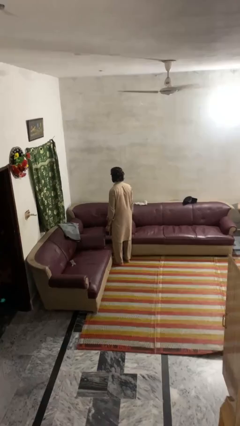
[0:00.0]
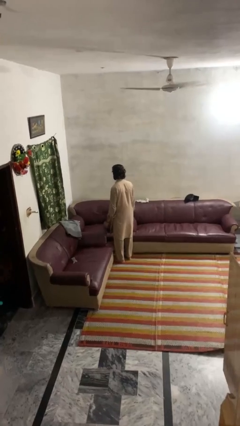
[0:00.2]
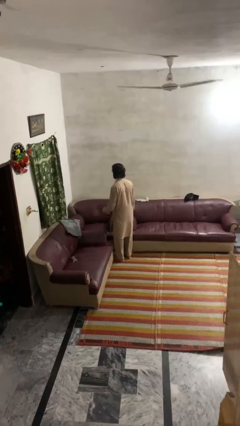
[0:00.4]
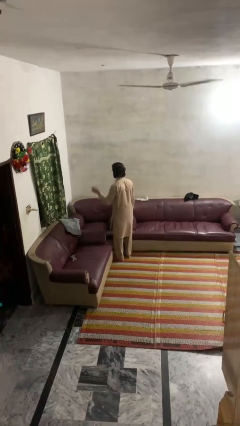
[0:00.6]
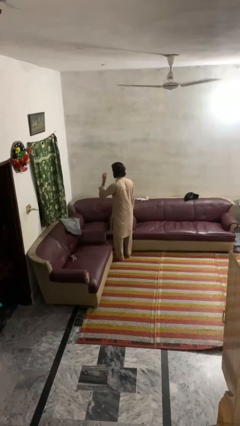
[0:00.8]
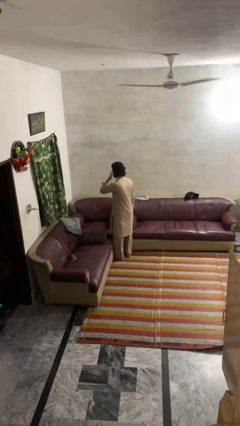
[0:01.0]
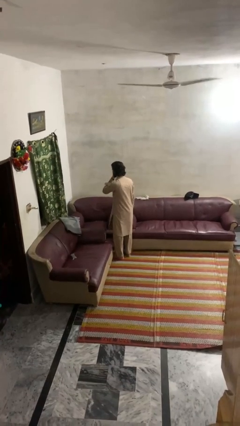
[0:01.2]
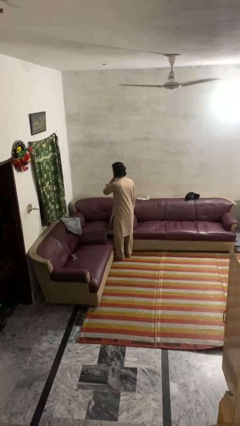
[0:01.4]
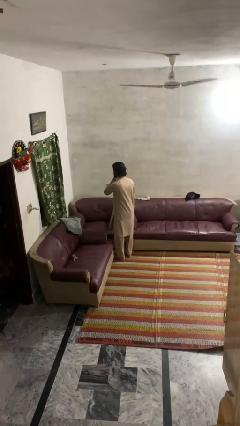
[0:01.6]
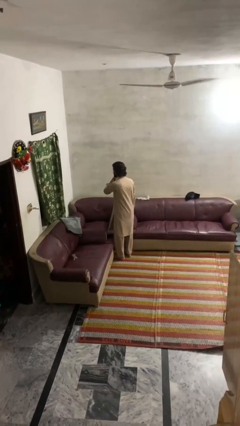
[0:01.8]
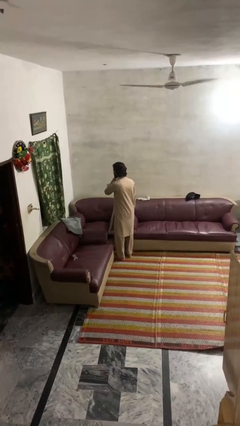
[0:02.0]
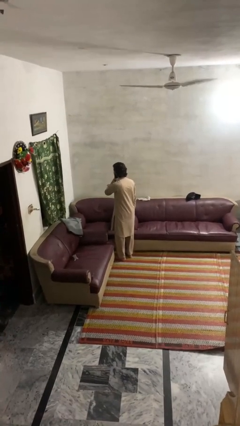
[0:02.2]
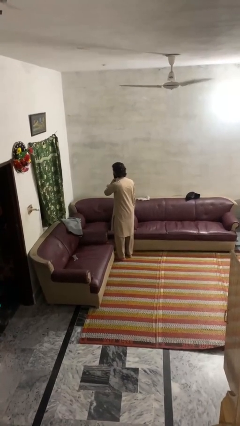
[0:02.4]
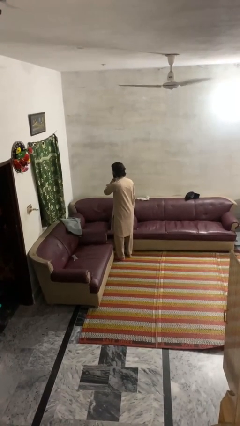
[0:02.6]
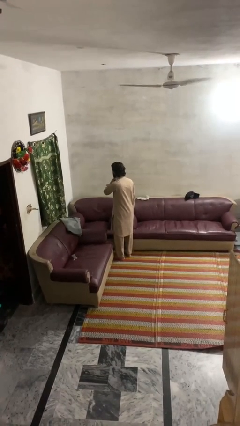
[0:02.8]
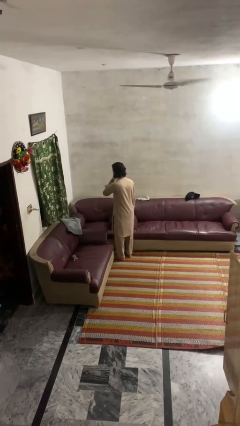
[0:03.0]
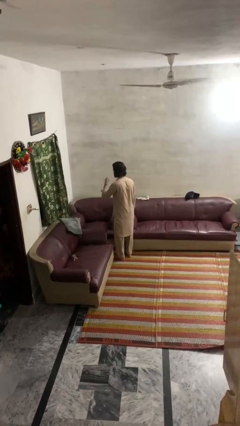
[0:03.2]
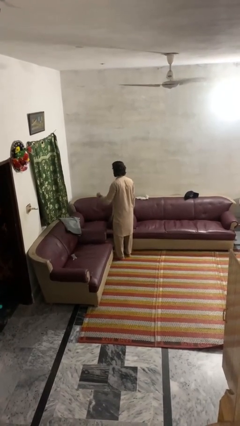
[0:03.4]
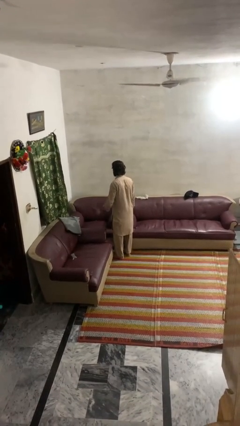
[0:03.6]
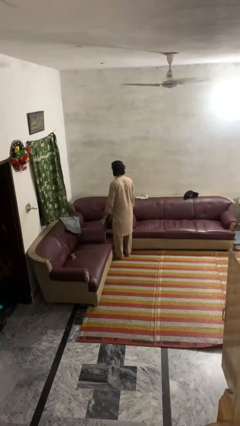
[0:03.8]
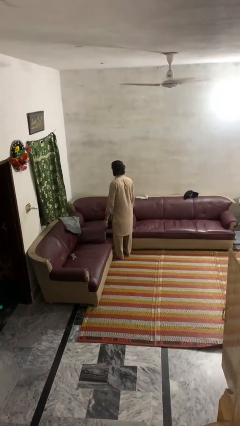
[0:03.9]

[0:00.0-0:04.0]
person scratches face

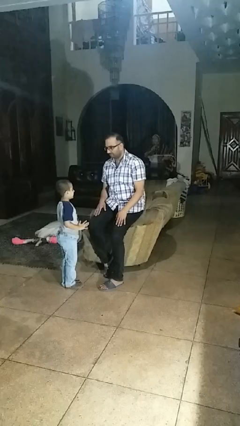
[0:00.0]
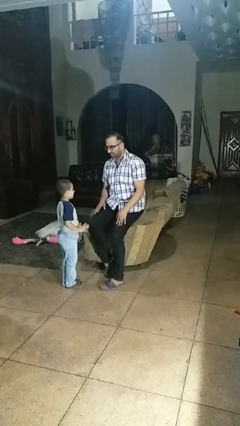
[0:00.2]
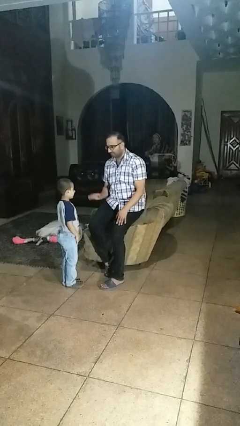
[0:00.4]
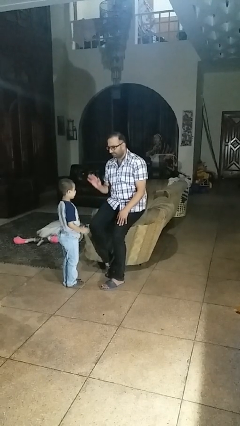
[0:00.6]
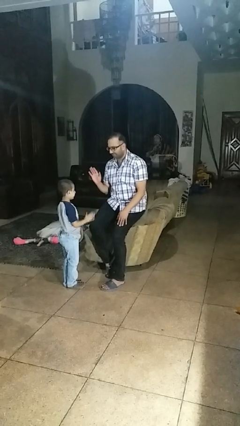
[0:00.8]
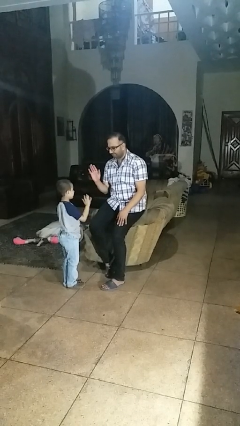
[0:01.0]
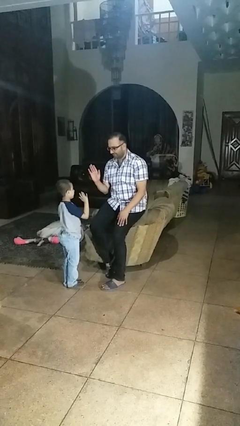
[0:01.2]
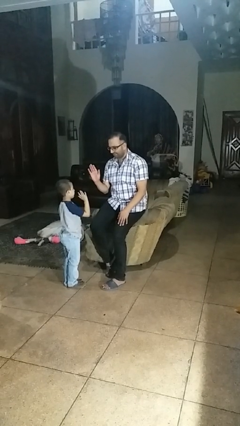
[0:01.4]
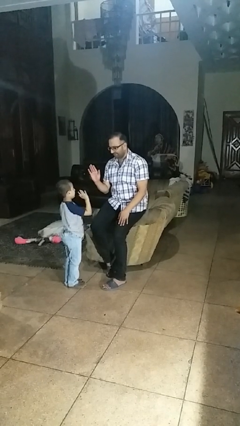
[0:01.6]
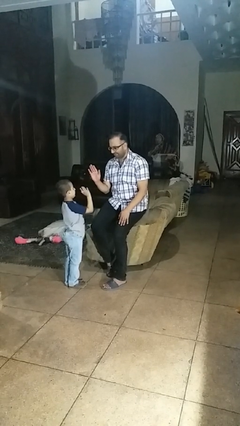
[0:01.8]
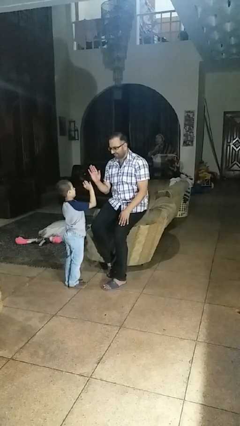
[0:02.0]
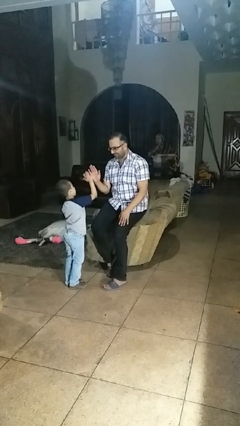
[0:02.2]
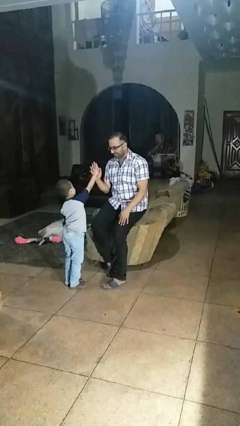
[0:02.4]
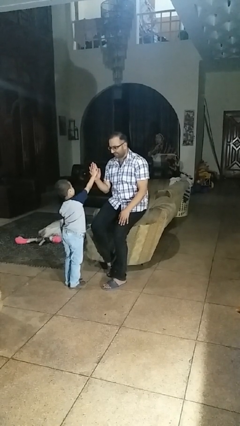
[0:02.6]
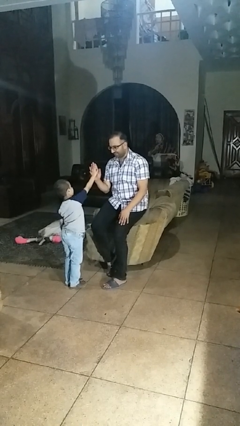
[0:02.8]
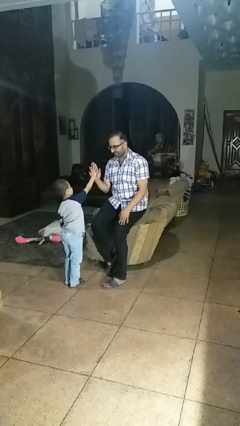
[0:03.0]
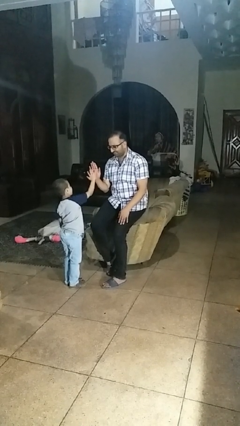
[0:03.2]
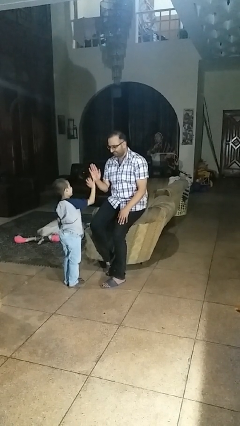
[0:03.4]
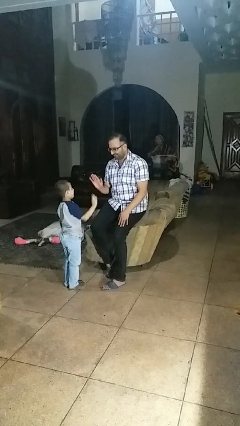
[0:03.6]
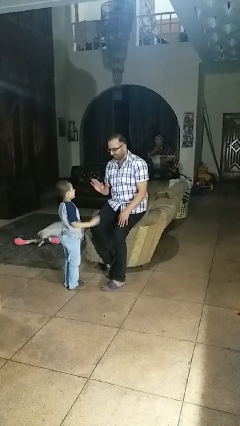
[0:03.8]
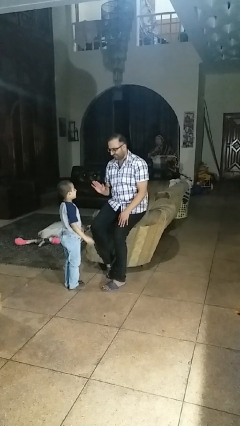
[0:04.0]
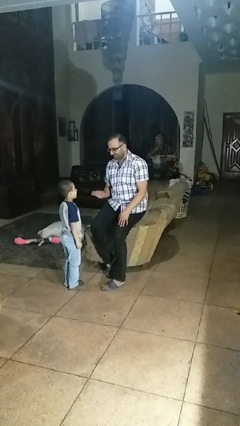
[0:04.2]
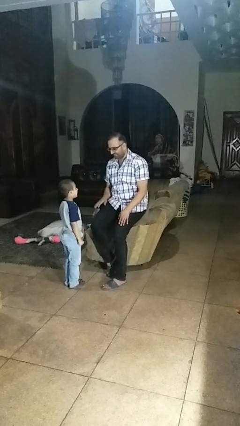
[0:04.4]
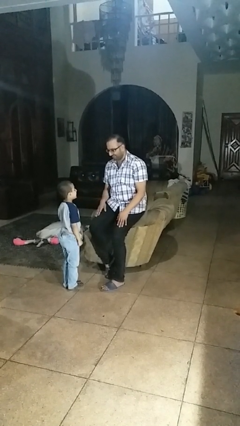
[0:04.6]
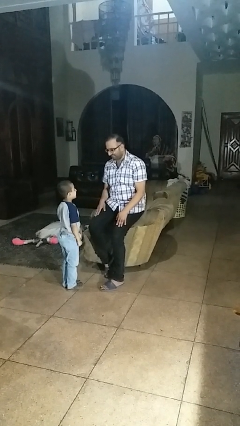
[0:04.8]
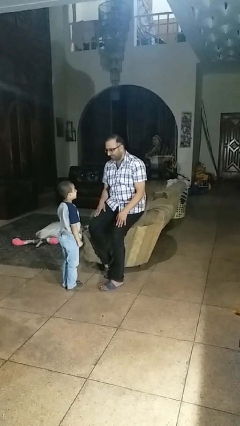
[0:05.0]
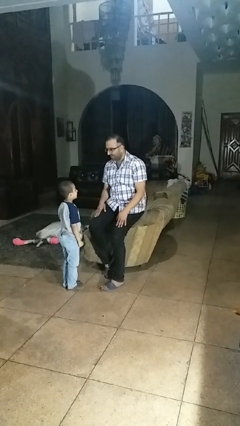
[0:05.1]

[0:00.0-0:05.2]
person highfives hand

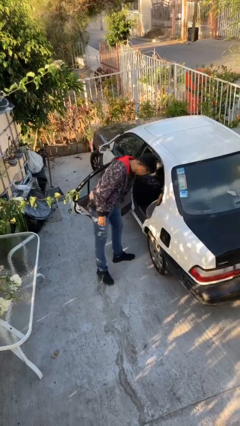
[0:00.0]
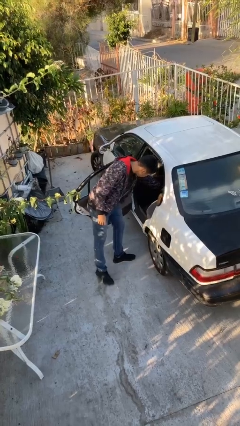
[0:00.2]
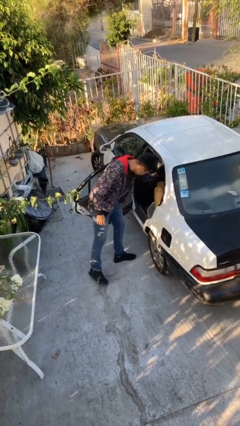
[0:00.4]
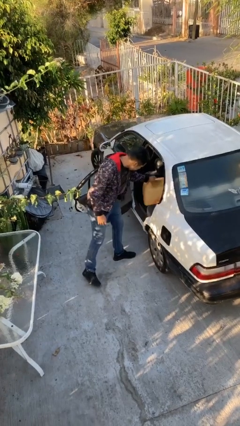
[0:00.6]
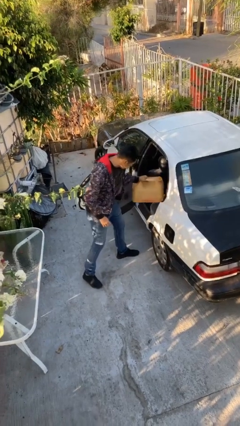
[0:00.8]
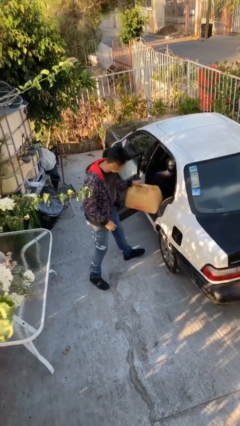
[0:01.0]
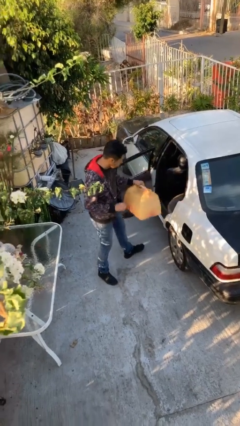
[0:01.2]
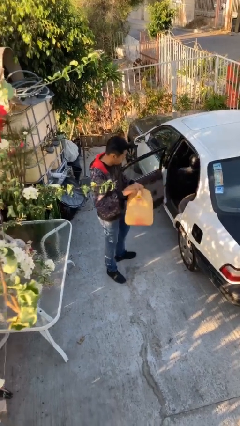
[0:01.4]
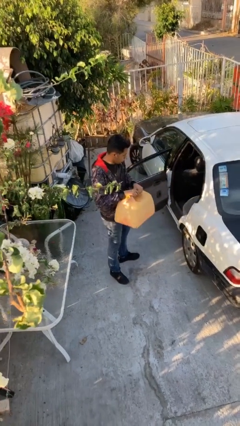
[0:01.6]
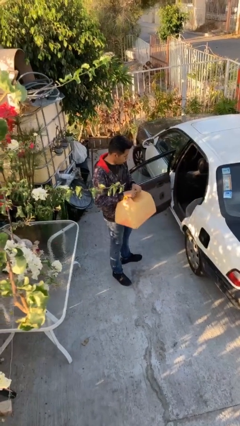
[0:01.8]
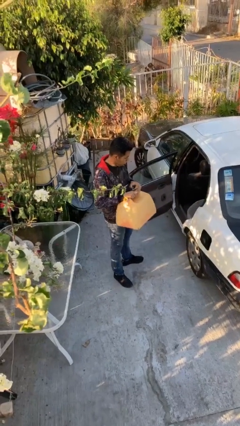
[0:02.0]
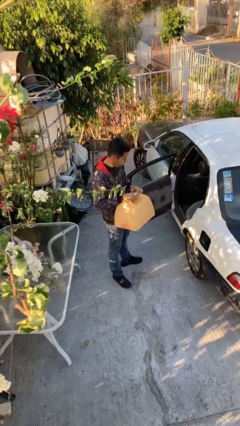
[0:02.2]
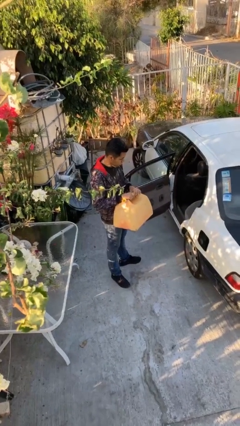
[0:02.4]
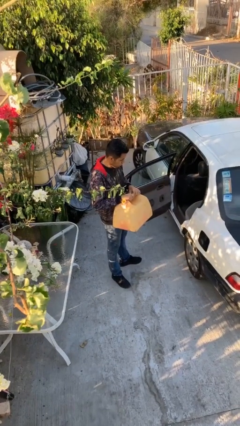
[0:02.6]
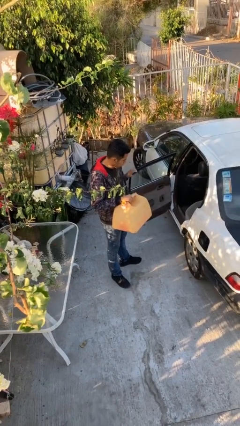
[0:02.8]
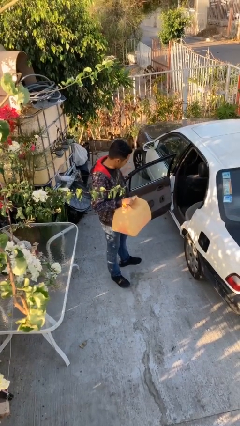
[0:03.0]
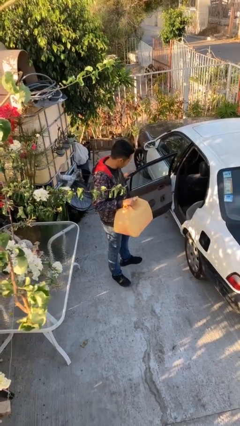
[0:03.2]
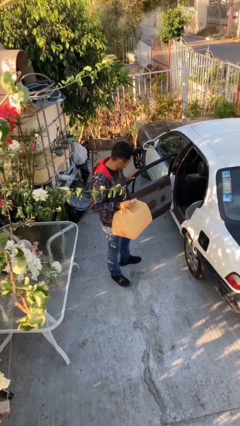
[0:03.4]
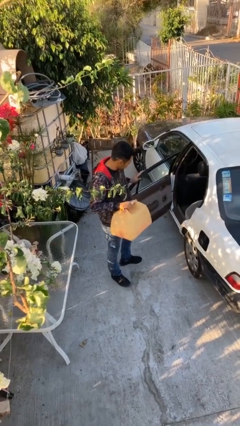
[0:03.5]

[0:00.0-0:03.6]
person unloads car

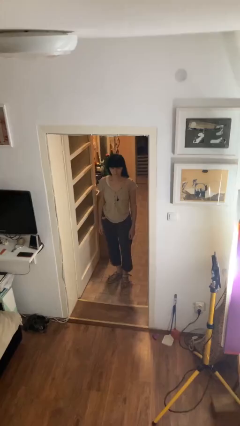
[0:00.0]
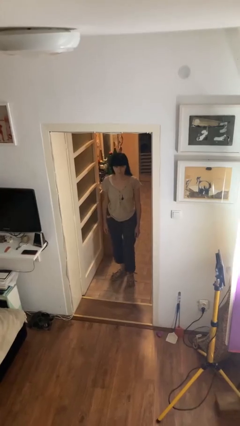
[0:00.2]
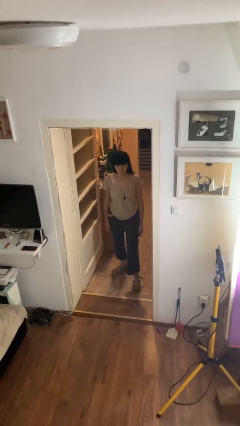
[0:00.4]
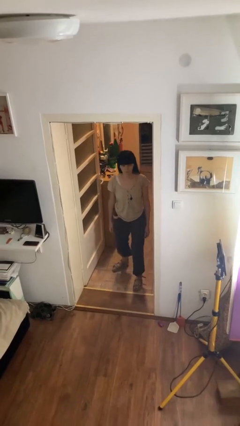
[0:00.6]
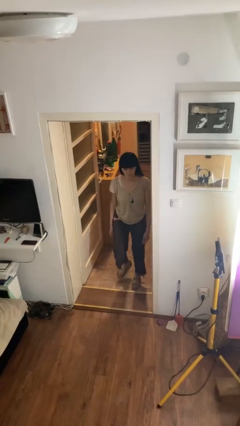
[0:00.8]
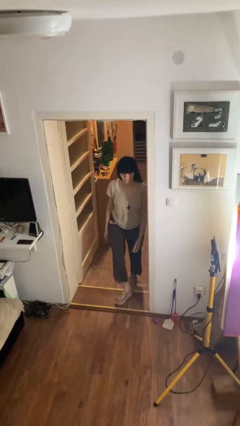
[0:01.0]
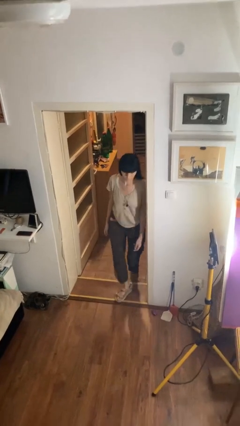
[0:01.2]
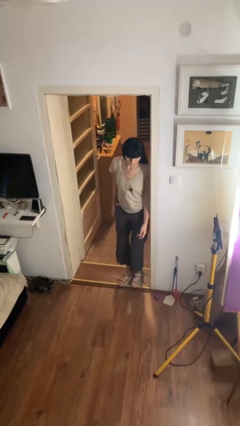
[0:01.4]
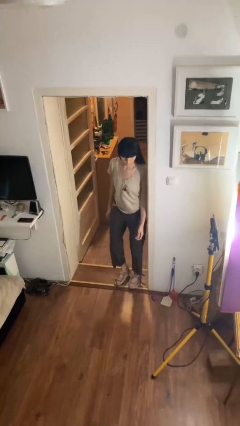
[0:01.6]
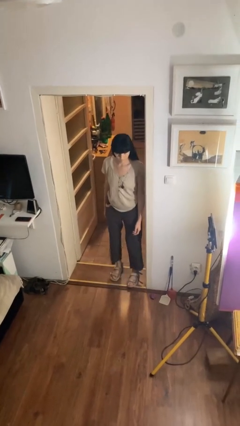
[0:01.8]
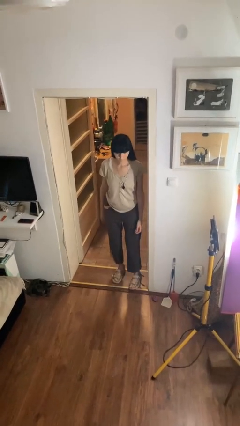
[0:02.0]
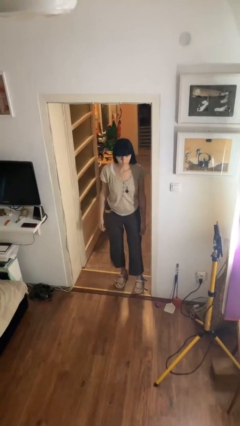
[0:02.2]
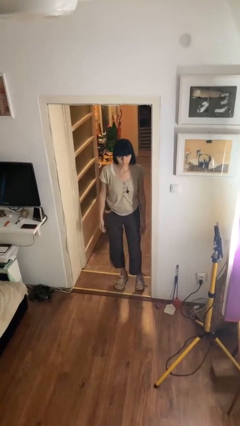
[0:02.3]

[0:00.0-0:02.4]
person bumps into wall

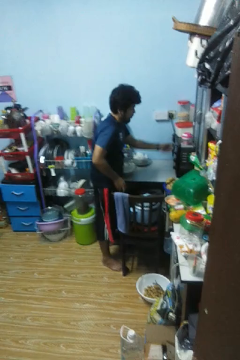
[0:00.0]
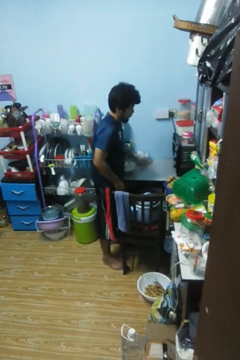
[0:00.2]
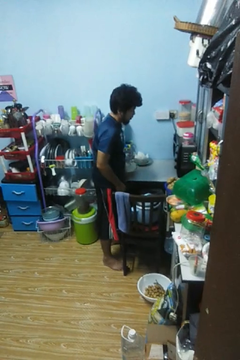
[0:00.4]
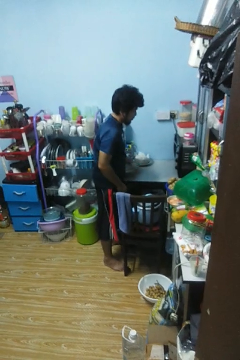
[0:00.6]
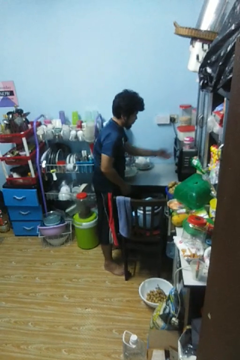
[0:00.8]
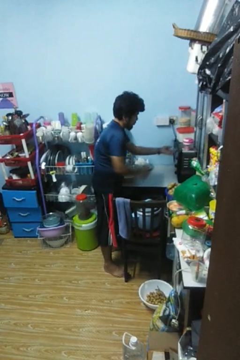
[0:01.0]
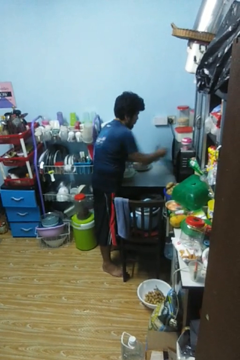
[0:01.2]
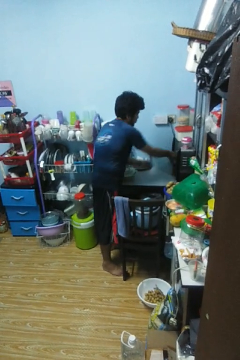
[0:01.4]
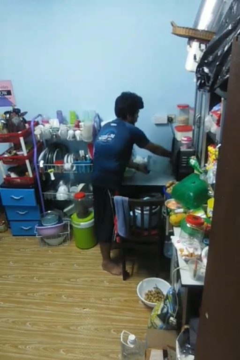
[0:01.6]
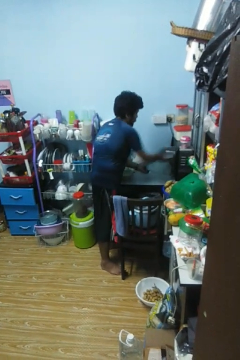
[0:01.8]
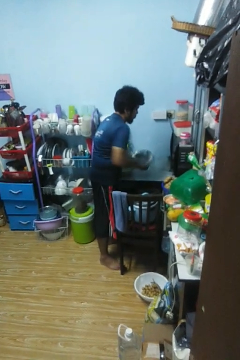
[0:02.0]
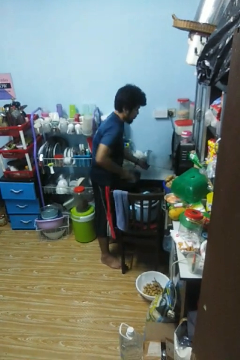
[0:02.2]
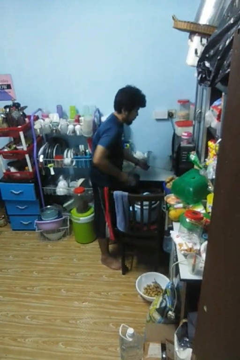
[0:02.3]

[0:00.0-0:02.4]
person takes object from oven

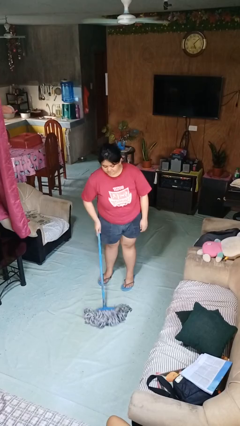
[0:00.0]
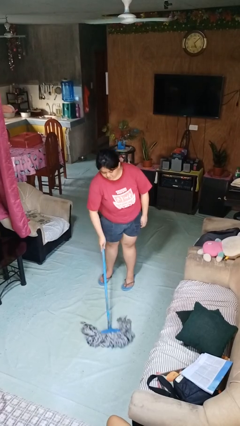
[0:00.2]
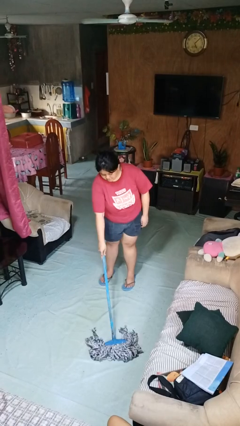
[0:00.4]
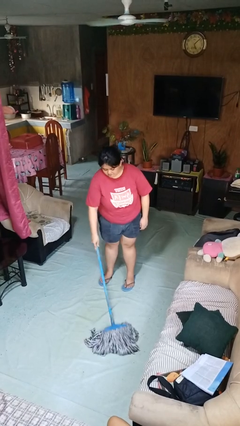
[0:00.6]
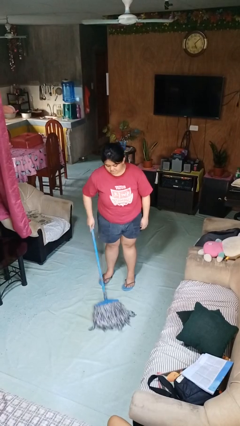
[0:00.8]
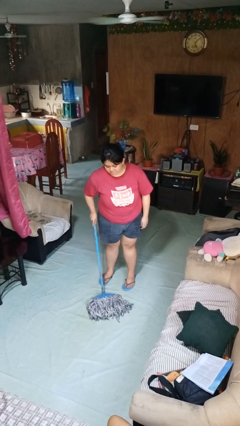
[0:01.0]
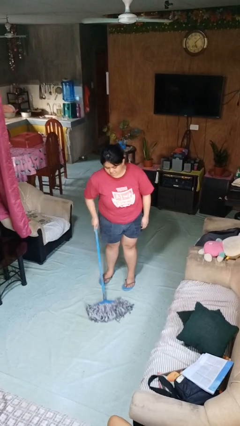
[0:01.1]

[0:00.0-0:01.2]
person mops
